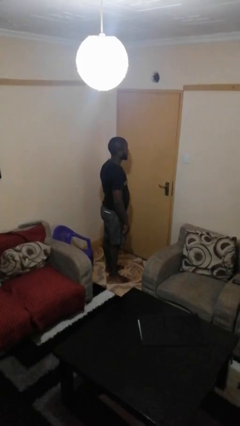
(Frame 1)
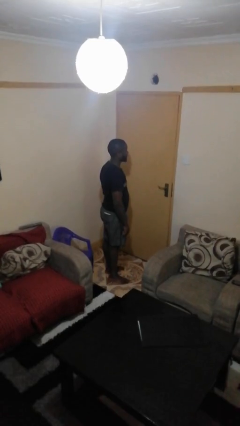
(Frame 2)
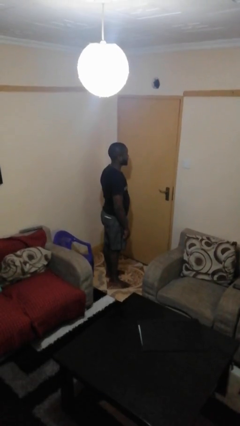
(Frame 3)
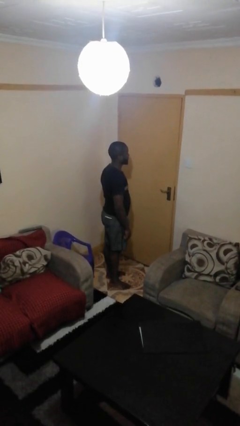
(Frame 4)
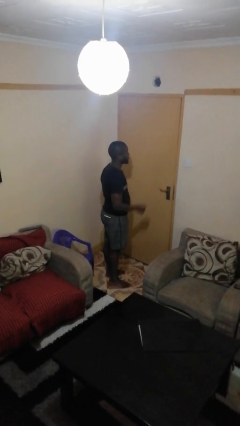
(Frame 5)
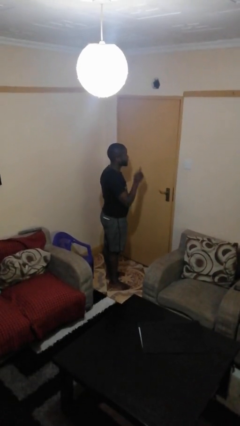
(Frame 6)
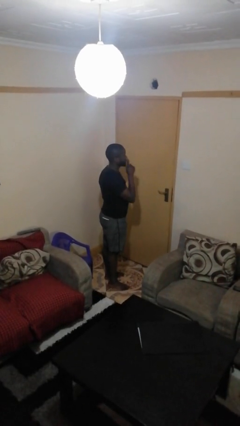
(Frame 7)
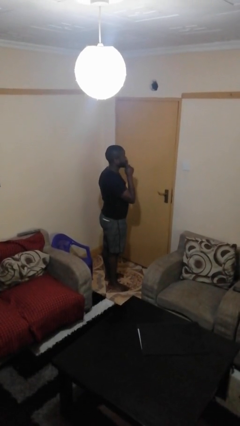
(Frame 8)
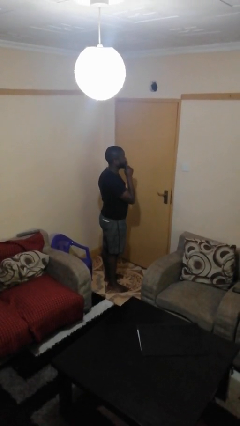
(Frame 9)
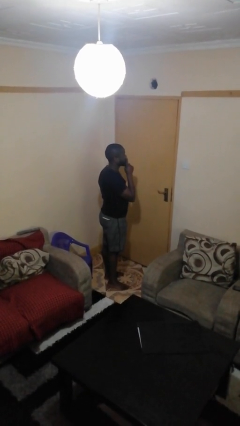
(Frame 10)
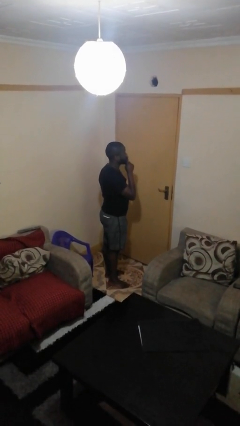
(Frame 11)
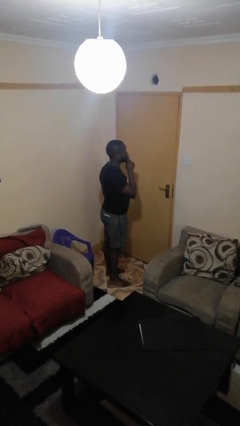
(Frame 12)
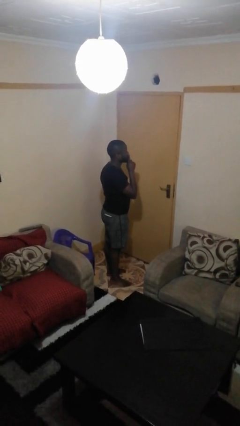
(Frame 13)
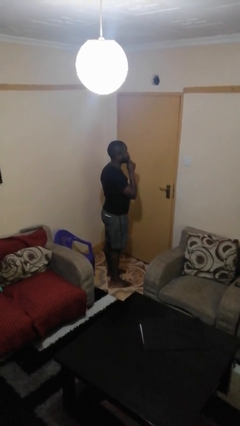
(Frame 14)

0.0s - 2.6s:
person gestures be quiet

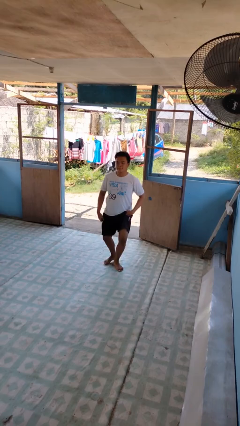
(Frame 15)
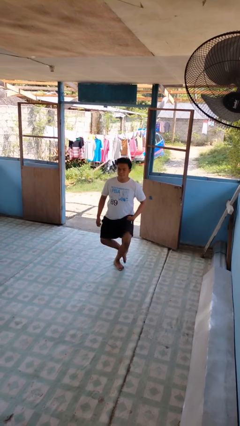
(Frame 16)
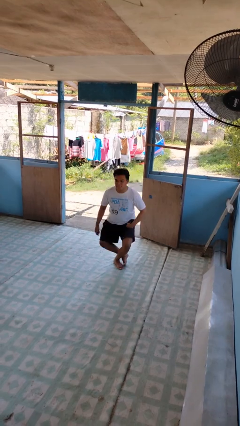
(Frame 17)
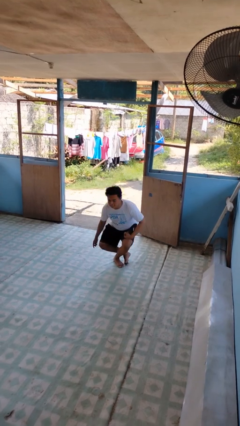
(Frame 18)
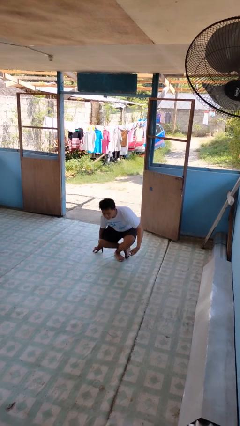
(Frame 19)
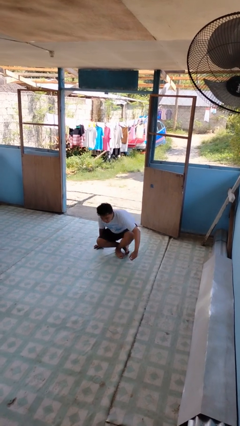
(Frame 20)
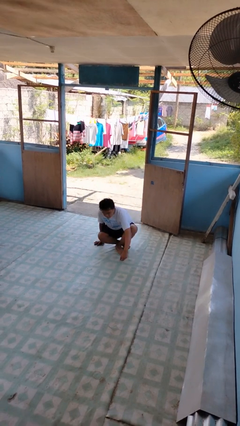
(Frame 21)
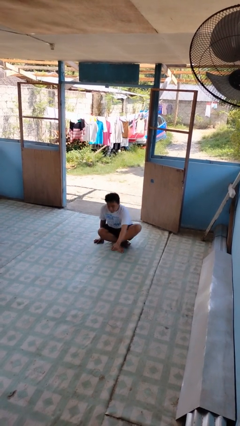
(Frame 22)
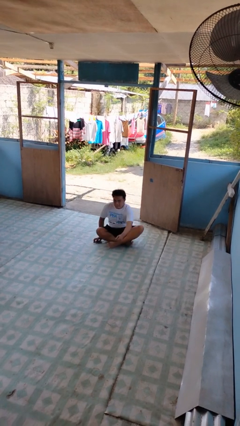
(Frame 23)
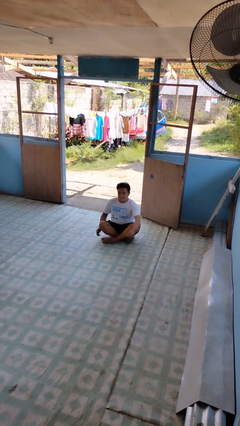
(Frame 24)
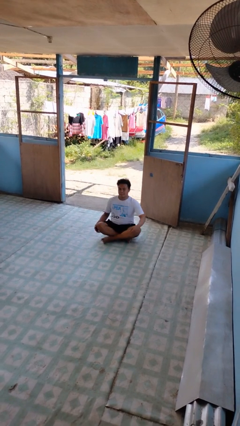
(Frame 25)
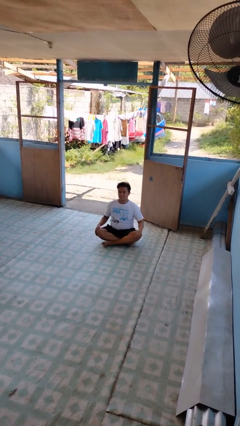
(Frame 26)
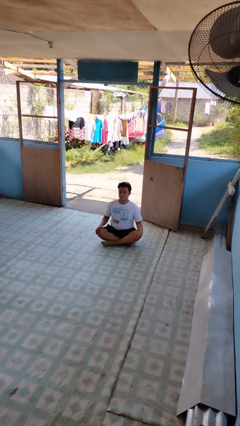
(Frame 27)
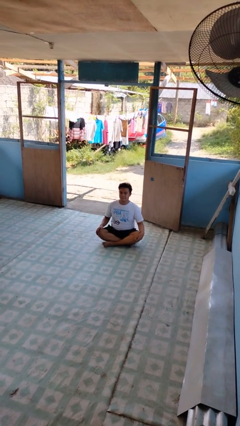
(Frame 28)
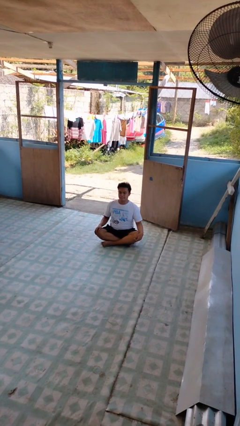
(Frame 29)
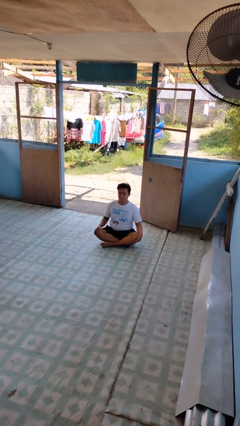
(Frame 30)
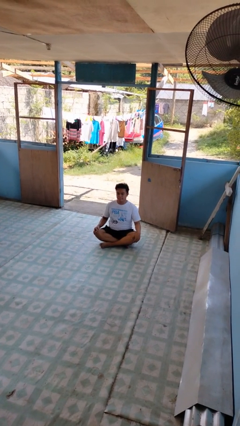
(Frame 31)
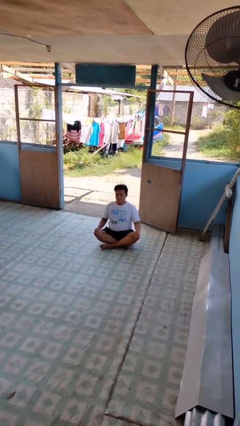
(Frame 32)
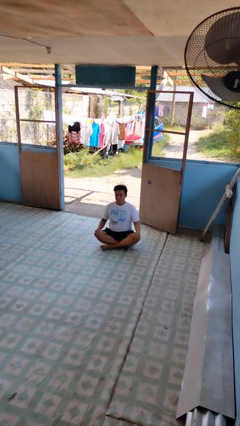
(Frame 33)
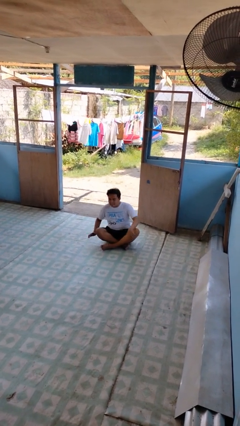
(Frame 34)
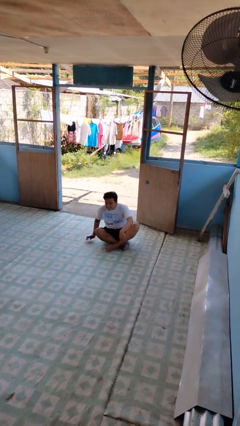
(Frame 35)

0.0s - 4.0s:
person sits crisscross

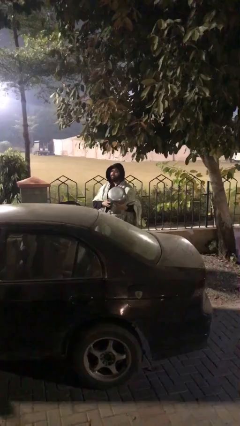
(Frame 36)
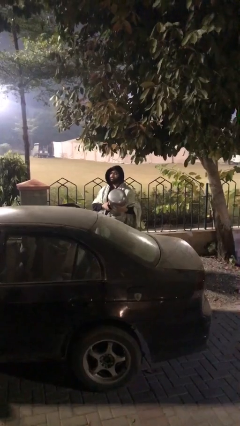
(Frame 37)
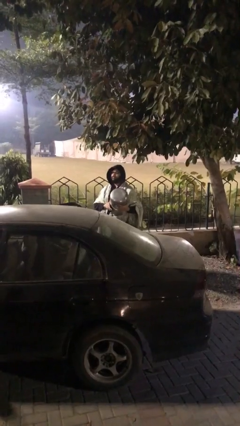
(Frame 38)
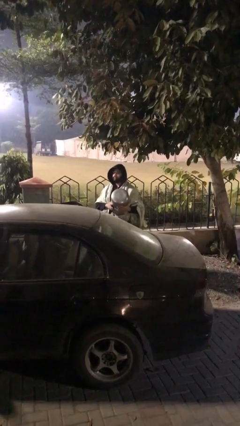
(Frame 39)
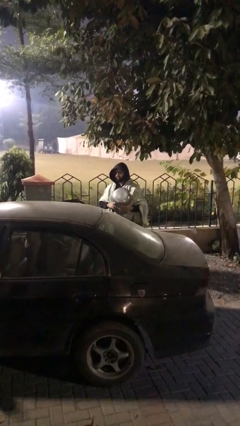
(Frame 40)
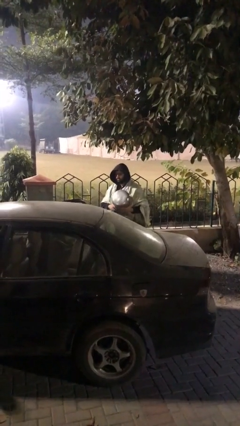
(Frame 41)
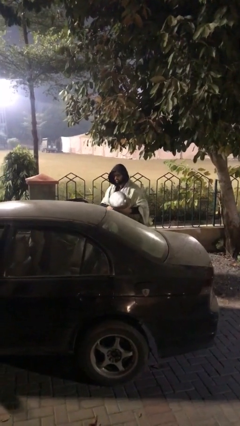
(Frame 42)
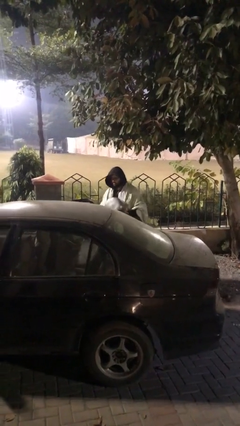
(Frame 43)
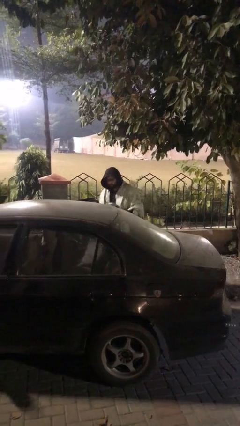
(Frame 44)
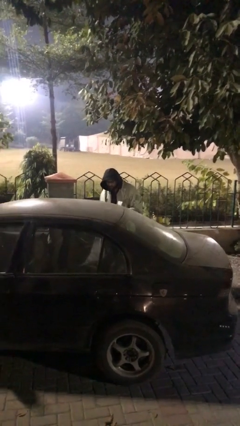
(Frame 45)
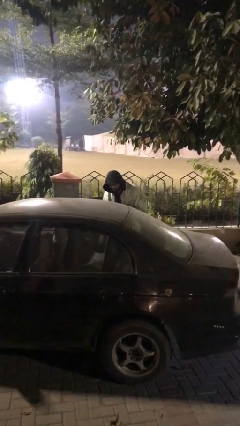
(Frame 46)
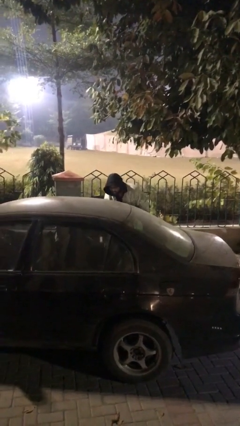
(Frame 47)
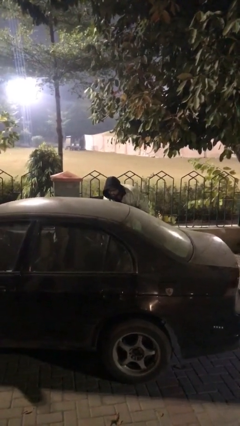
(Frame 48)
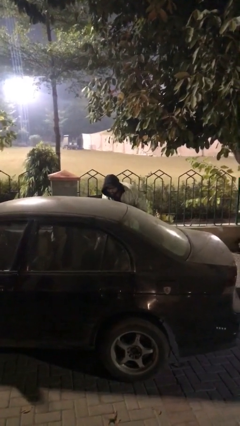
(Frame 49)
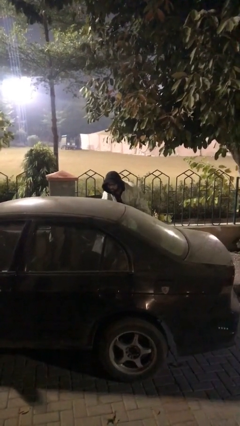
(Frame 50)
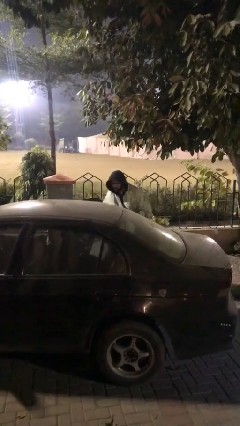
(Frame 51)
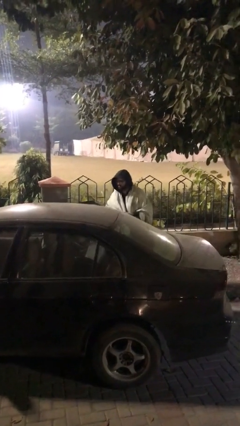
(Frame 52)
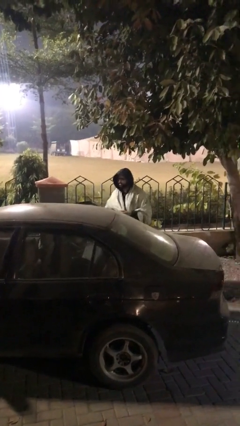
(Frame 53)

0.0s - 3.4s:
person loads car

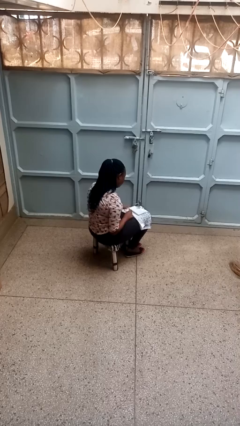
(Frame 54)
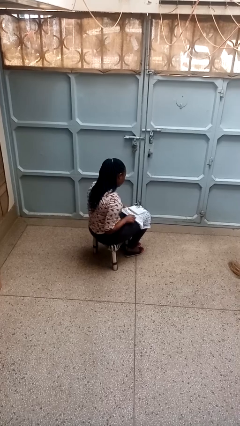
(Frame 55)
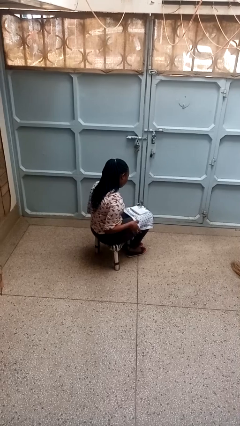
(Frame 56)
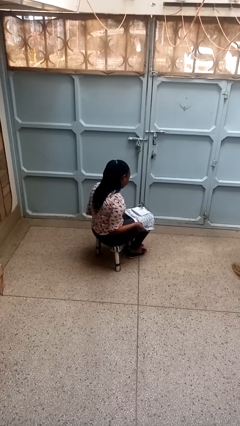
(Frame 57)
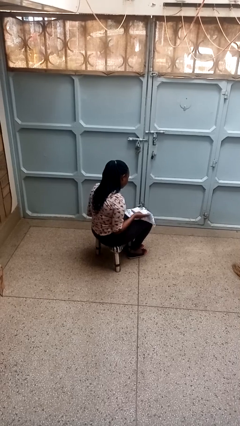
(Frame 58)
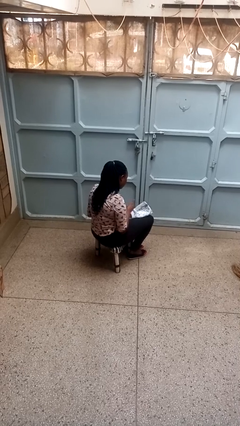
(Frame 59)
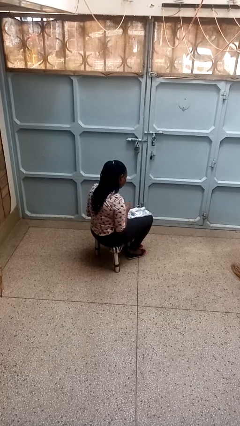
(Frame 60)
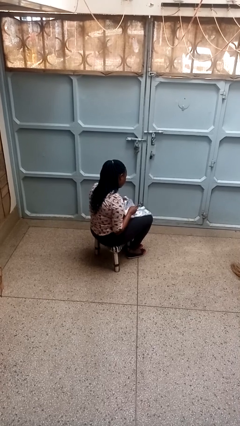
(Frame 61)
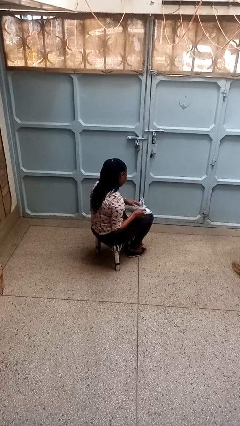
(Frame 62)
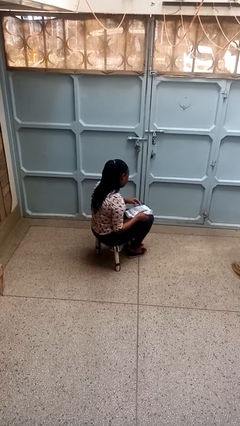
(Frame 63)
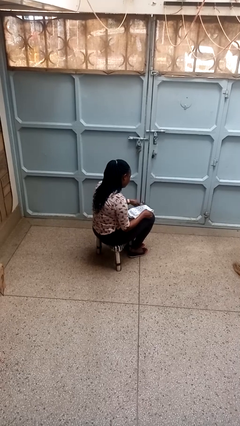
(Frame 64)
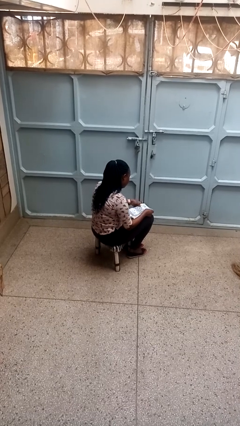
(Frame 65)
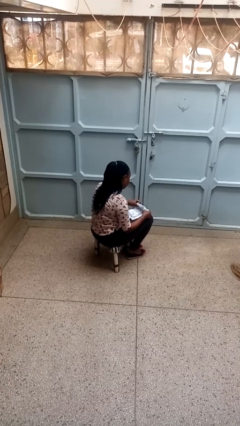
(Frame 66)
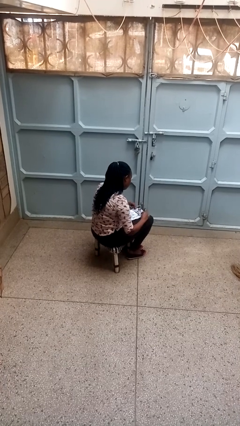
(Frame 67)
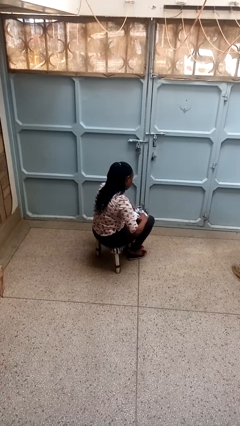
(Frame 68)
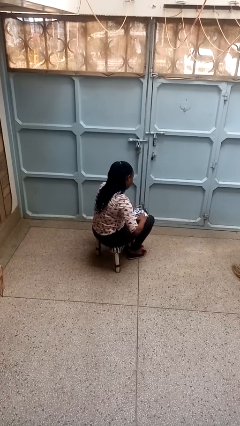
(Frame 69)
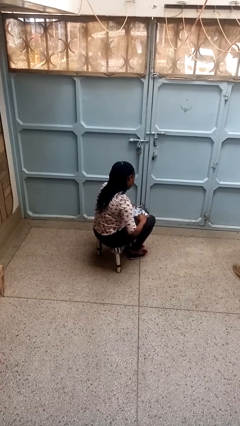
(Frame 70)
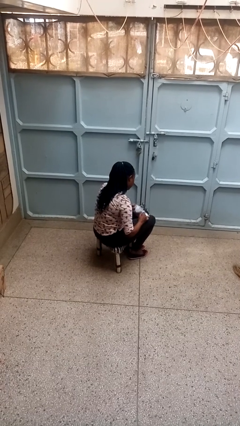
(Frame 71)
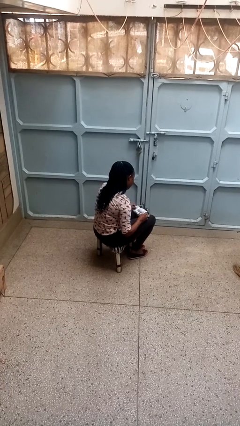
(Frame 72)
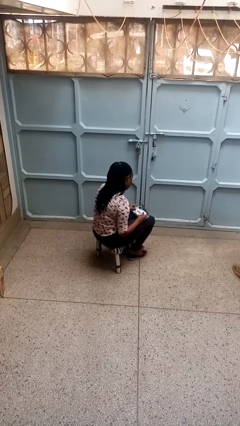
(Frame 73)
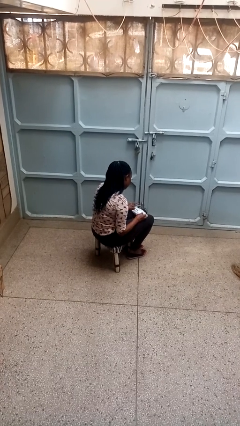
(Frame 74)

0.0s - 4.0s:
person wraps box

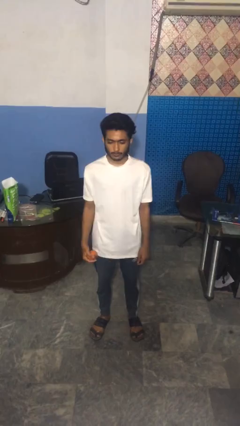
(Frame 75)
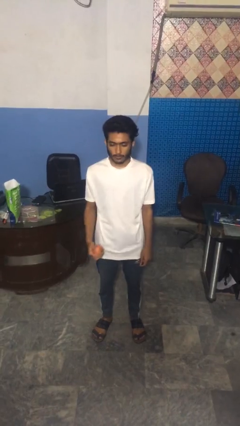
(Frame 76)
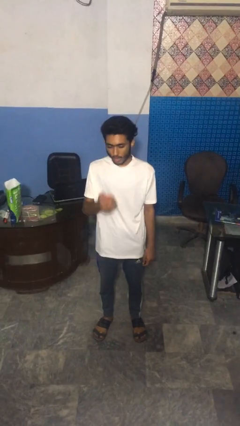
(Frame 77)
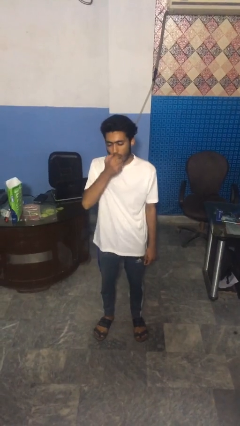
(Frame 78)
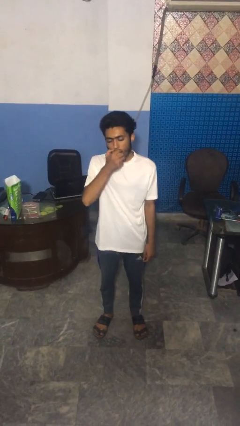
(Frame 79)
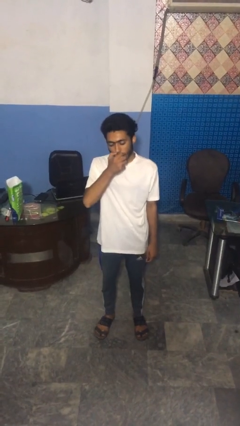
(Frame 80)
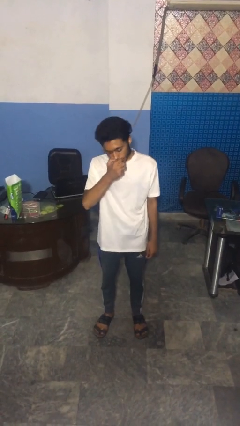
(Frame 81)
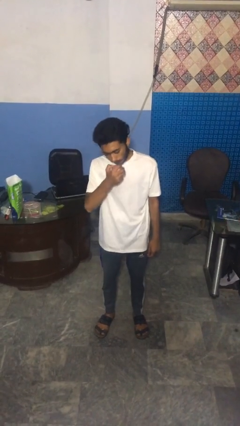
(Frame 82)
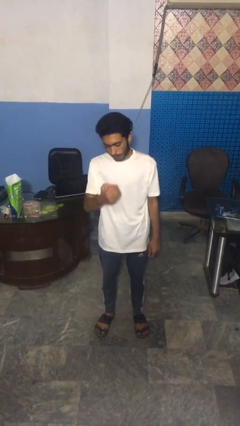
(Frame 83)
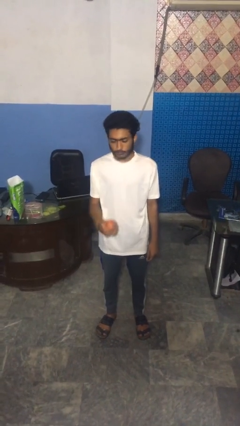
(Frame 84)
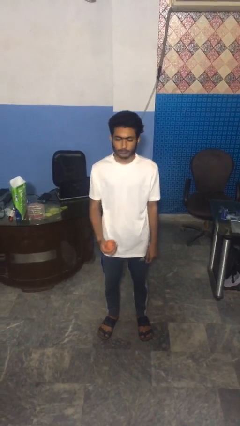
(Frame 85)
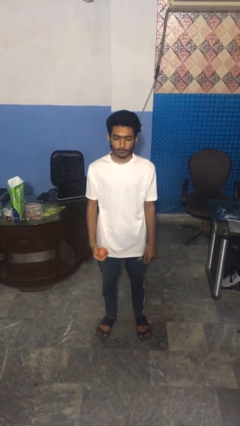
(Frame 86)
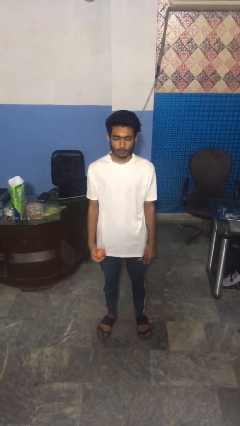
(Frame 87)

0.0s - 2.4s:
person eats apple

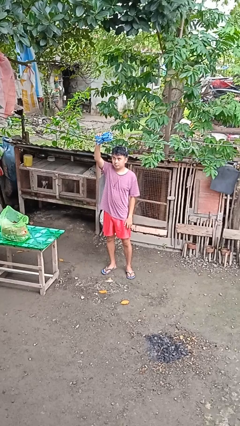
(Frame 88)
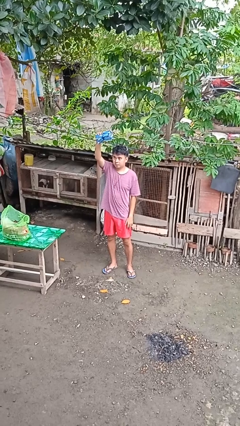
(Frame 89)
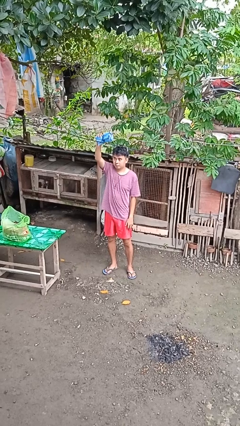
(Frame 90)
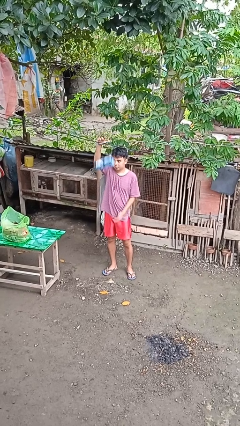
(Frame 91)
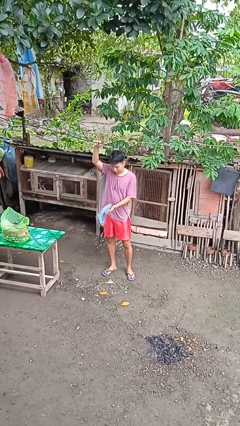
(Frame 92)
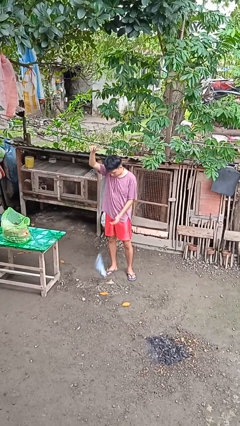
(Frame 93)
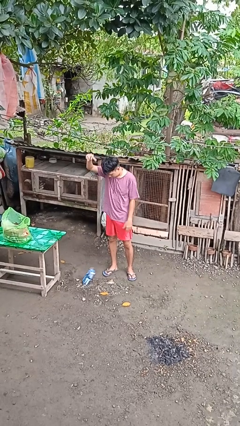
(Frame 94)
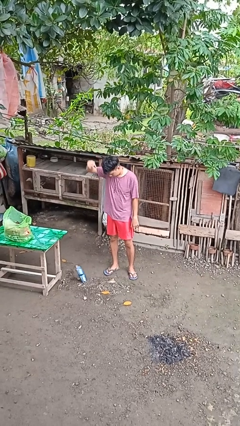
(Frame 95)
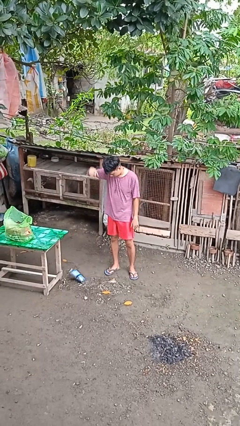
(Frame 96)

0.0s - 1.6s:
person drops object
